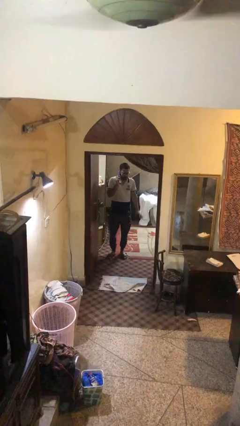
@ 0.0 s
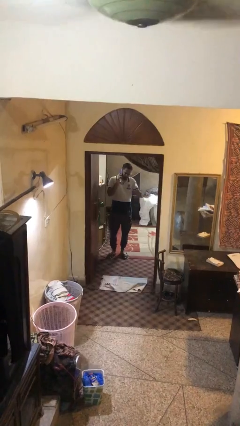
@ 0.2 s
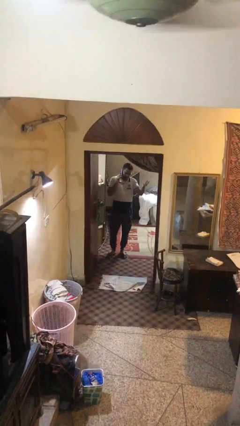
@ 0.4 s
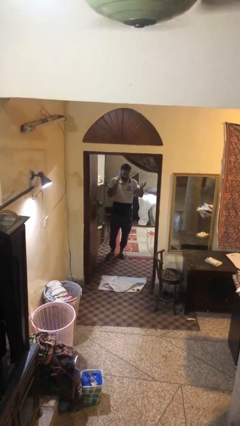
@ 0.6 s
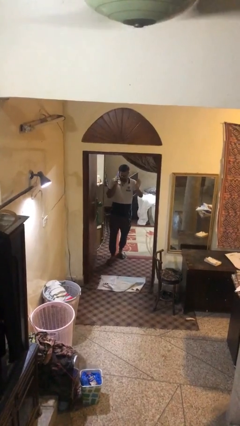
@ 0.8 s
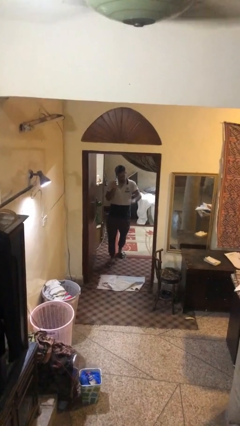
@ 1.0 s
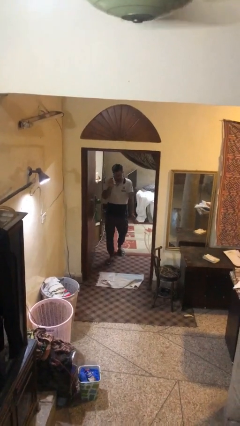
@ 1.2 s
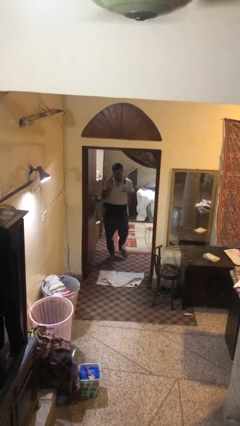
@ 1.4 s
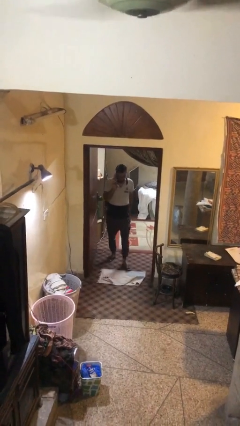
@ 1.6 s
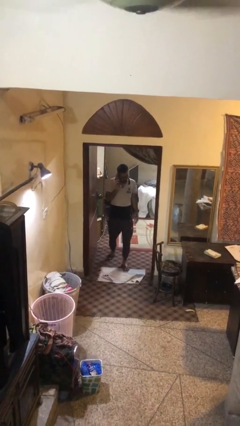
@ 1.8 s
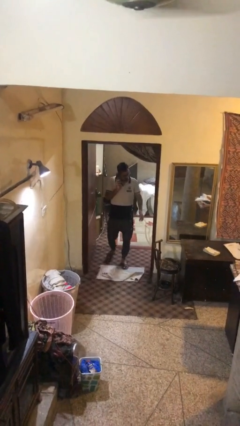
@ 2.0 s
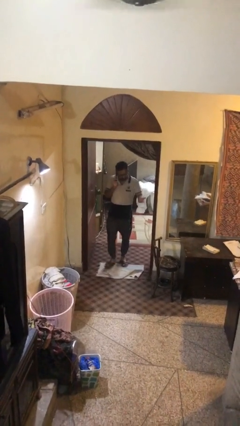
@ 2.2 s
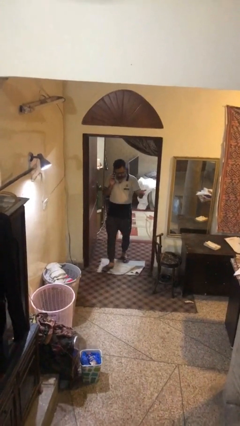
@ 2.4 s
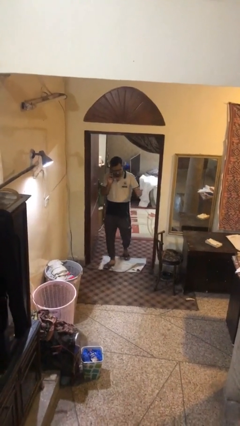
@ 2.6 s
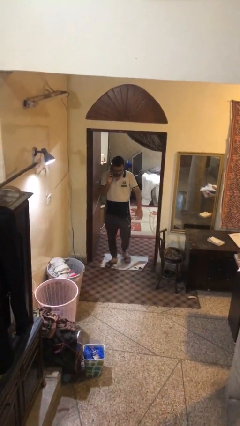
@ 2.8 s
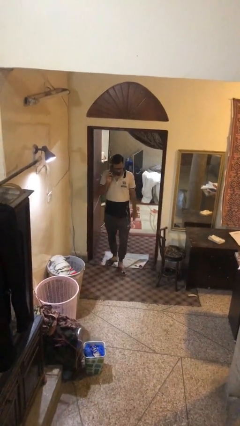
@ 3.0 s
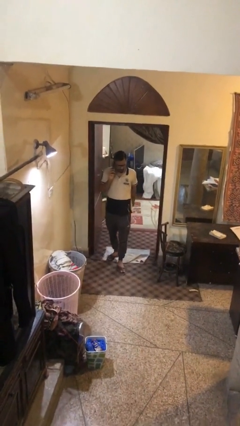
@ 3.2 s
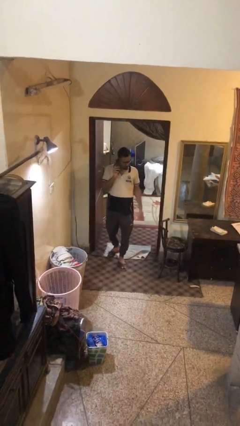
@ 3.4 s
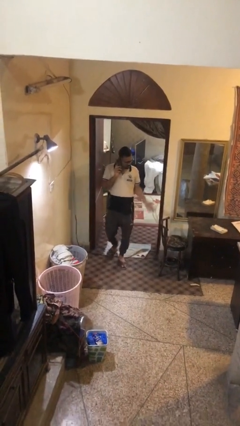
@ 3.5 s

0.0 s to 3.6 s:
person enters scene through structure

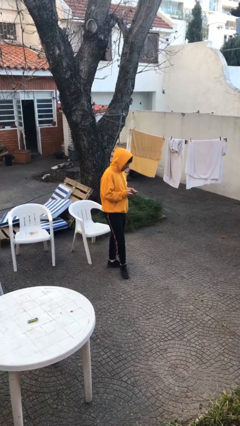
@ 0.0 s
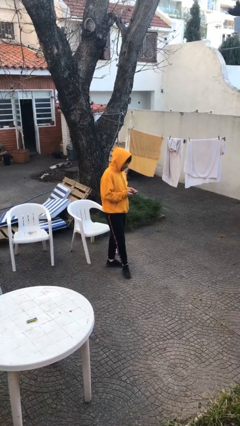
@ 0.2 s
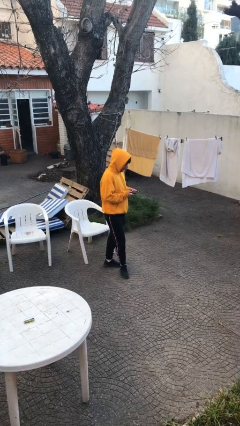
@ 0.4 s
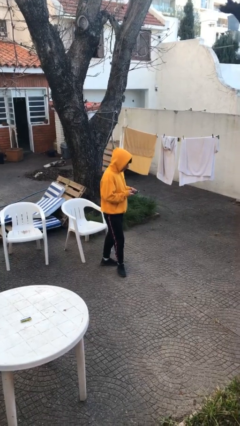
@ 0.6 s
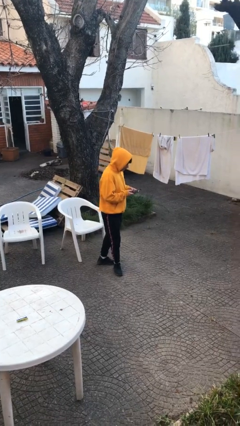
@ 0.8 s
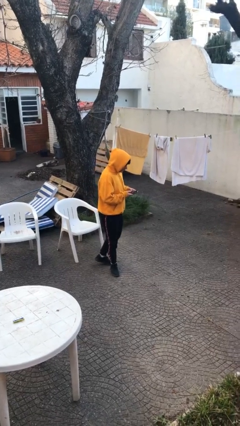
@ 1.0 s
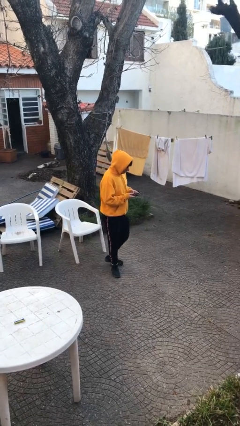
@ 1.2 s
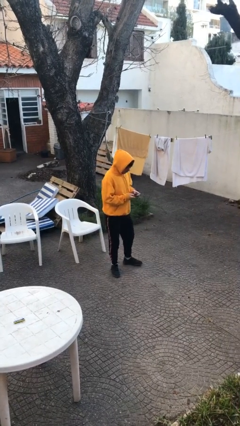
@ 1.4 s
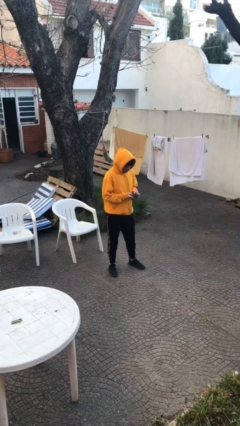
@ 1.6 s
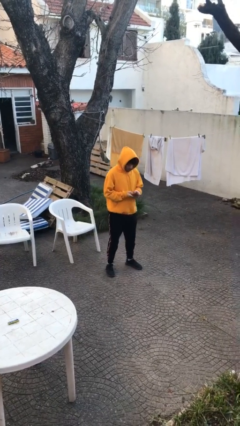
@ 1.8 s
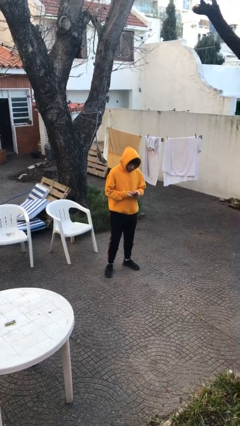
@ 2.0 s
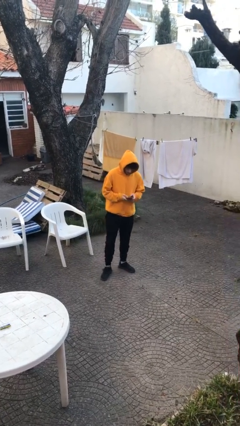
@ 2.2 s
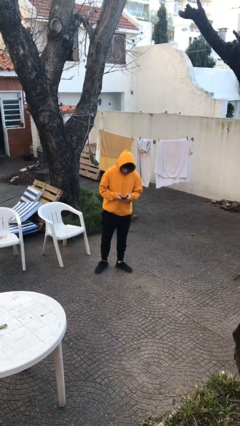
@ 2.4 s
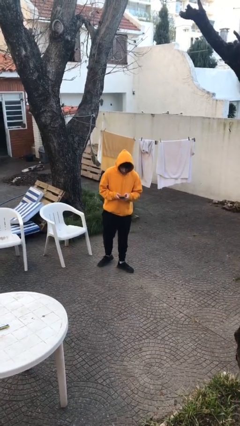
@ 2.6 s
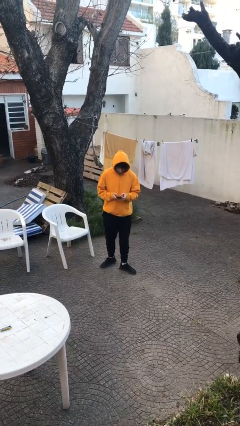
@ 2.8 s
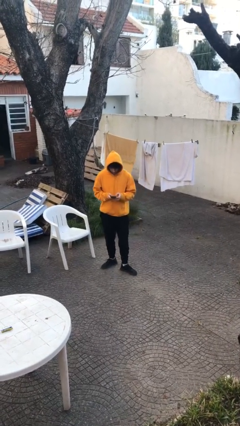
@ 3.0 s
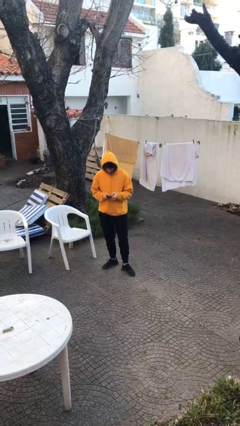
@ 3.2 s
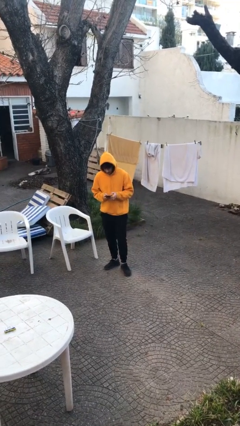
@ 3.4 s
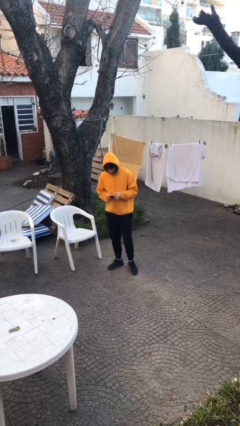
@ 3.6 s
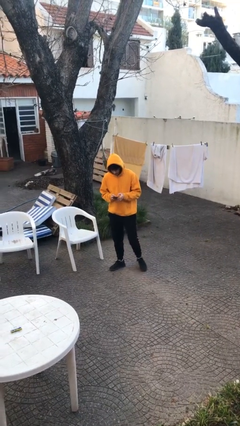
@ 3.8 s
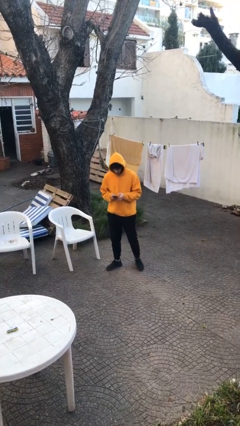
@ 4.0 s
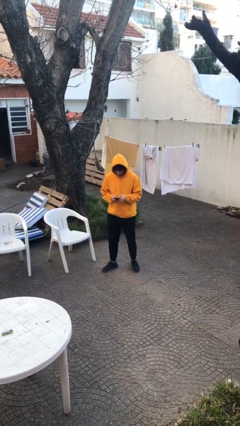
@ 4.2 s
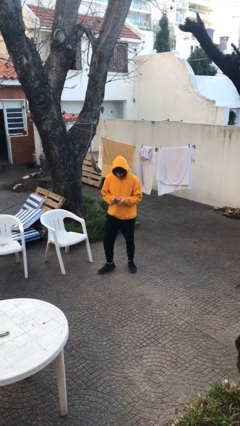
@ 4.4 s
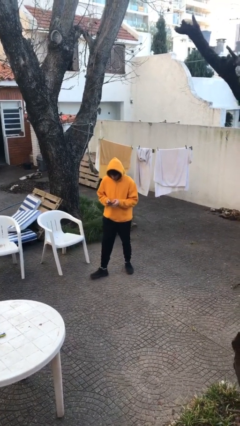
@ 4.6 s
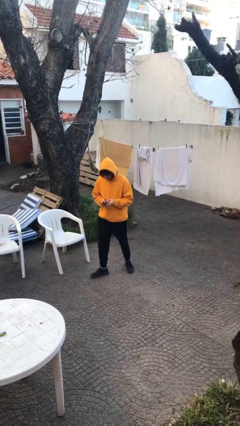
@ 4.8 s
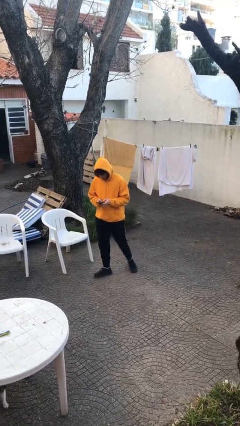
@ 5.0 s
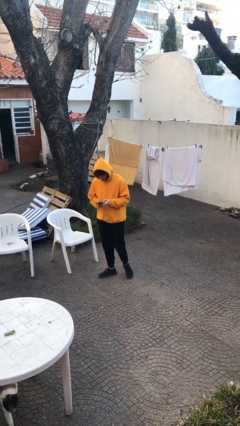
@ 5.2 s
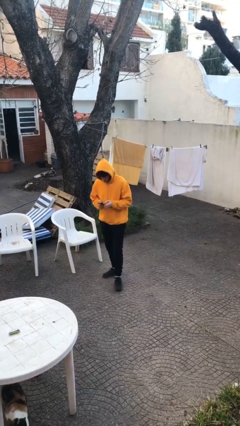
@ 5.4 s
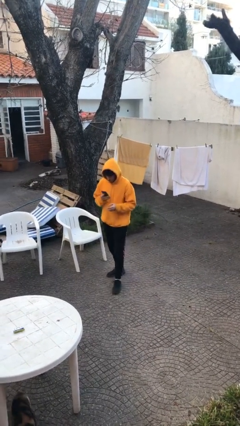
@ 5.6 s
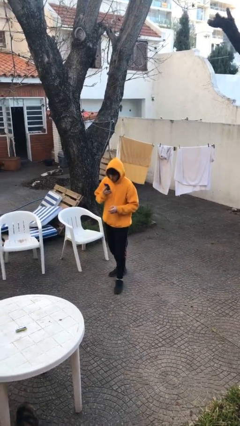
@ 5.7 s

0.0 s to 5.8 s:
person texts on phone

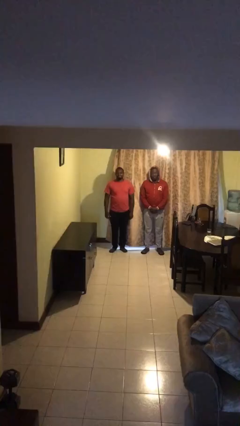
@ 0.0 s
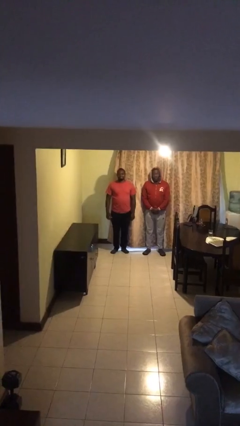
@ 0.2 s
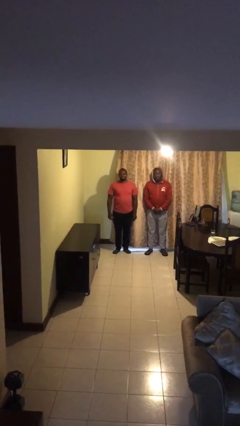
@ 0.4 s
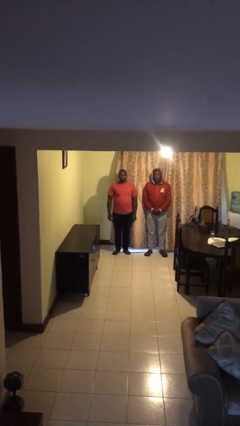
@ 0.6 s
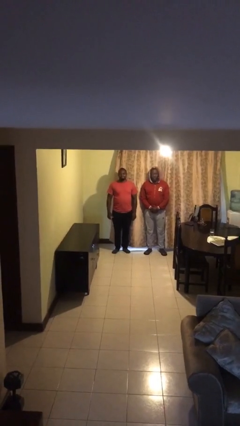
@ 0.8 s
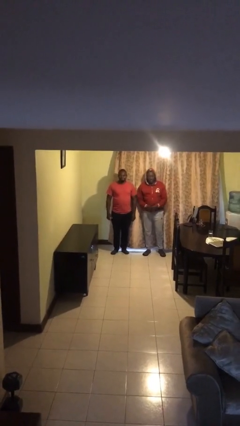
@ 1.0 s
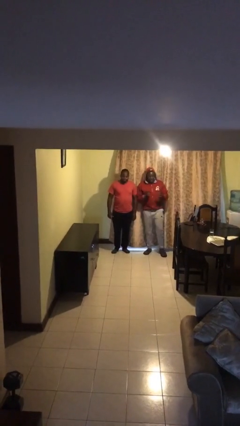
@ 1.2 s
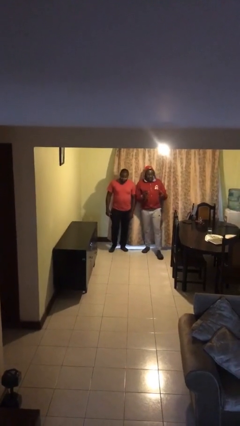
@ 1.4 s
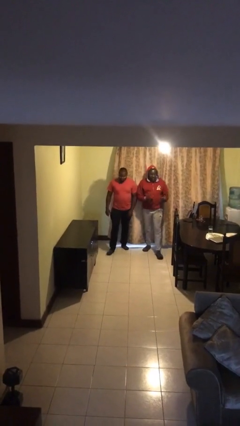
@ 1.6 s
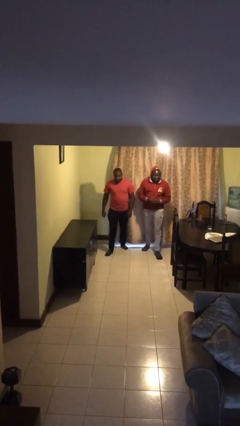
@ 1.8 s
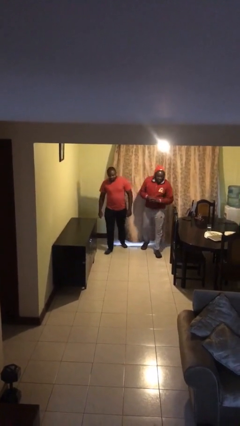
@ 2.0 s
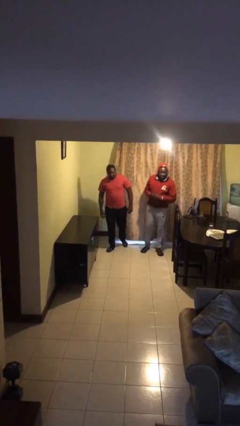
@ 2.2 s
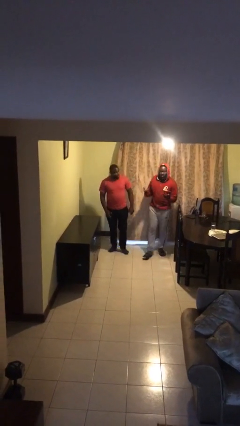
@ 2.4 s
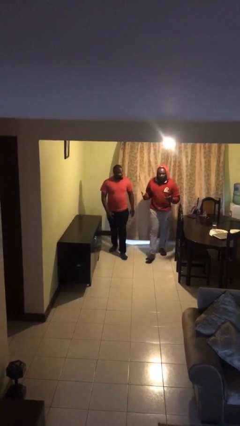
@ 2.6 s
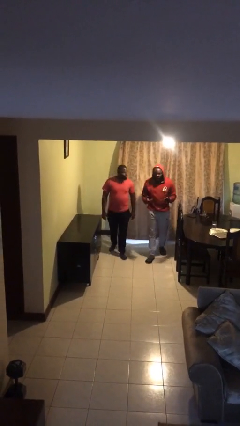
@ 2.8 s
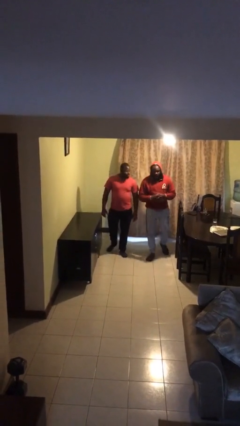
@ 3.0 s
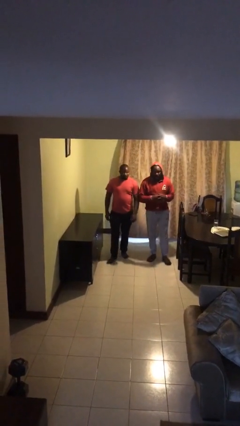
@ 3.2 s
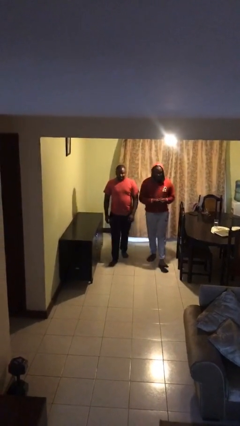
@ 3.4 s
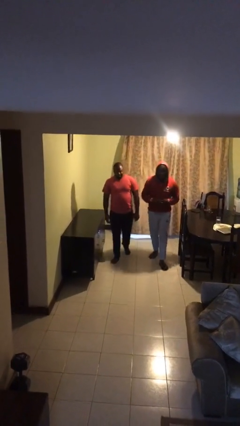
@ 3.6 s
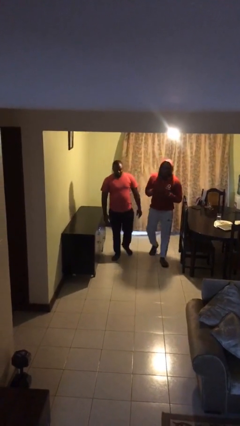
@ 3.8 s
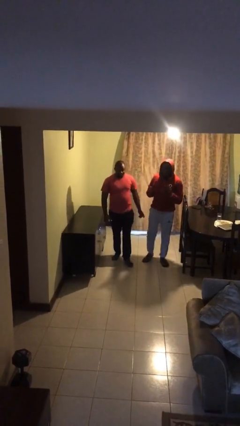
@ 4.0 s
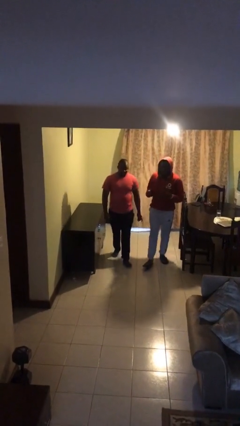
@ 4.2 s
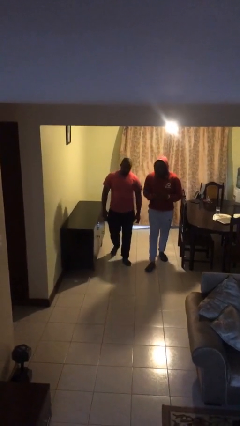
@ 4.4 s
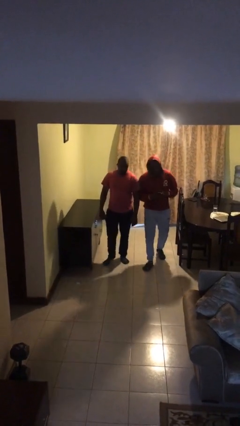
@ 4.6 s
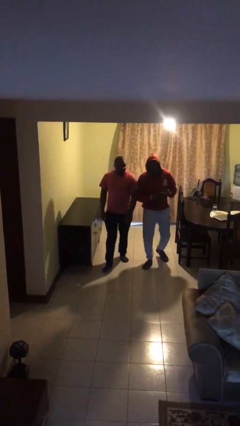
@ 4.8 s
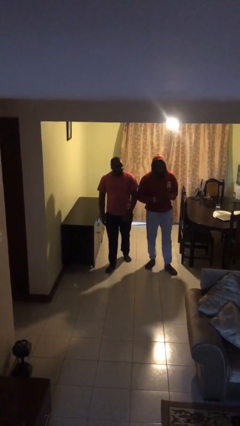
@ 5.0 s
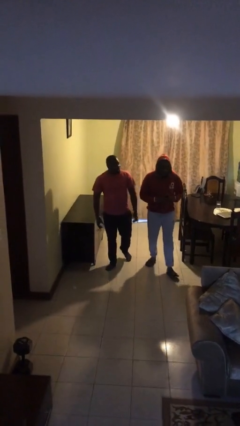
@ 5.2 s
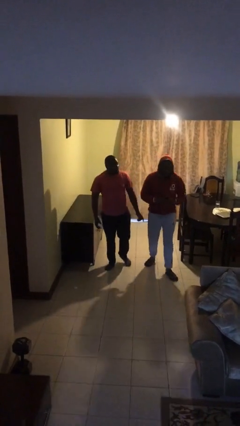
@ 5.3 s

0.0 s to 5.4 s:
person talks to person

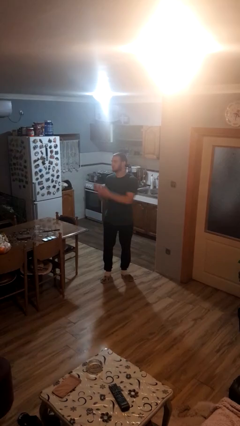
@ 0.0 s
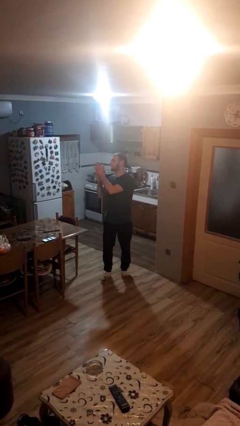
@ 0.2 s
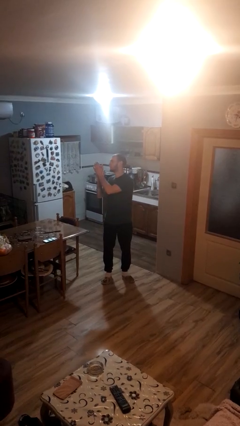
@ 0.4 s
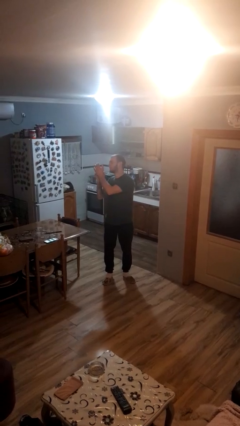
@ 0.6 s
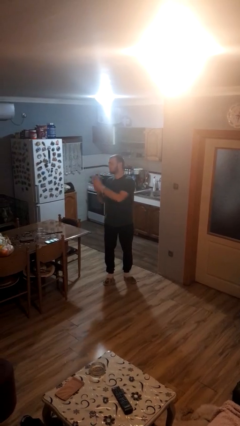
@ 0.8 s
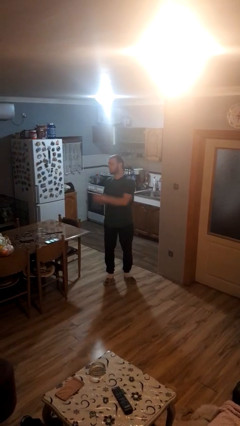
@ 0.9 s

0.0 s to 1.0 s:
person claps hands

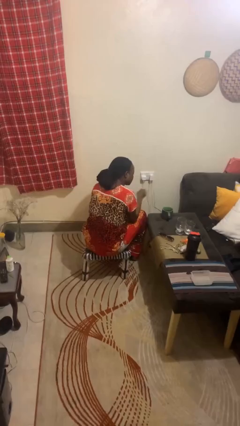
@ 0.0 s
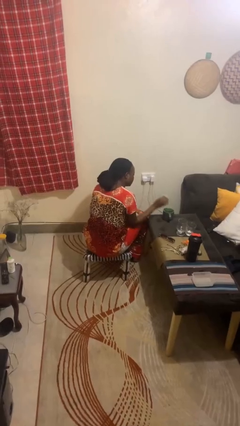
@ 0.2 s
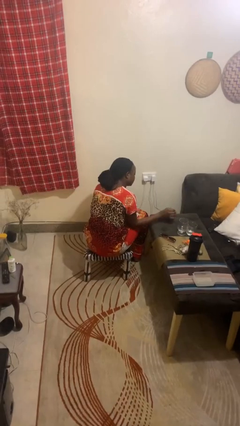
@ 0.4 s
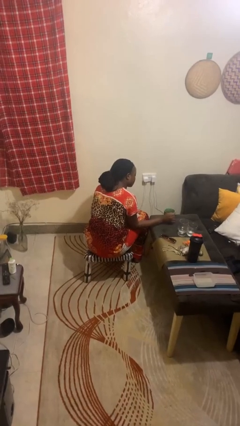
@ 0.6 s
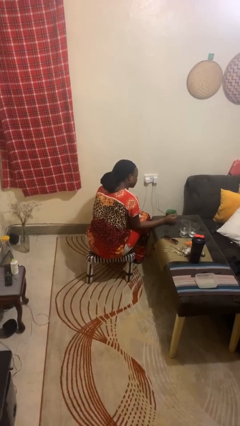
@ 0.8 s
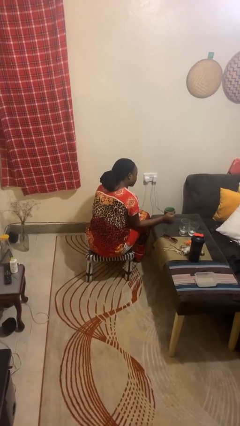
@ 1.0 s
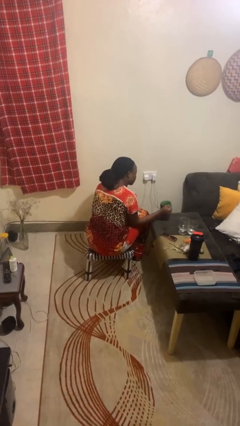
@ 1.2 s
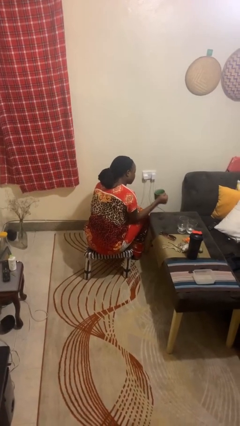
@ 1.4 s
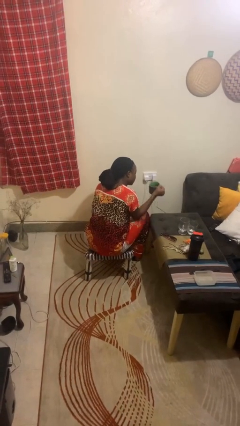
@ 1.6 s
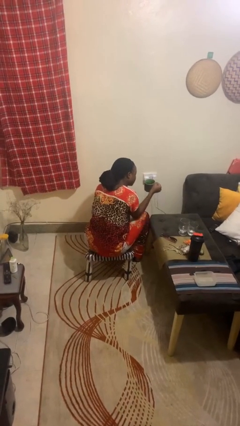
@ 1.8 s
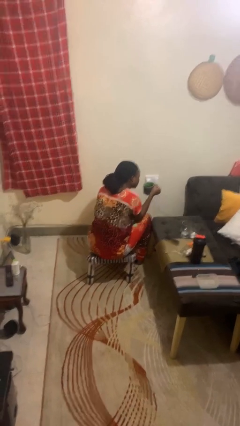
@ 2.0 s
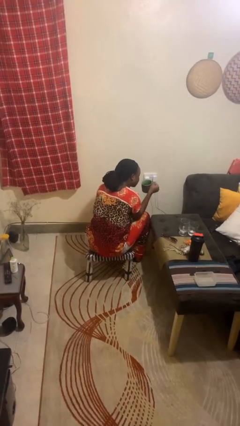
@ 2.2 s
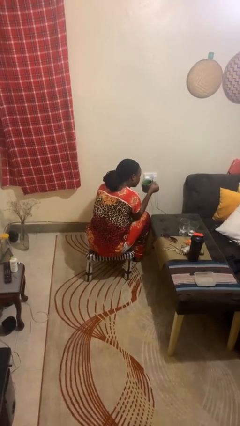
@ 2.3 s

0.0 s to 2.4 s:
person picks up object from table
